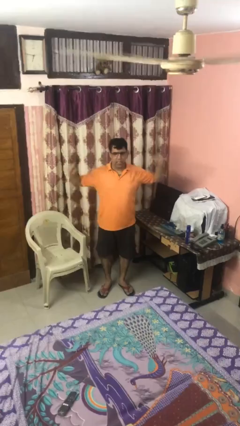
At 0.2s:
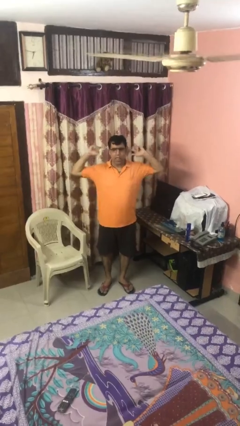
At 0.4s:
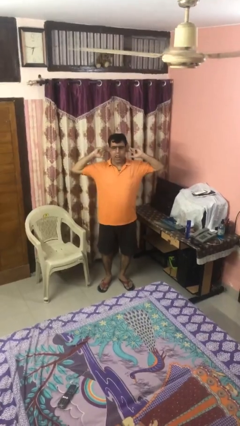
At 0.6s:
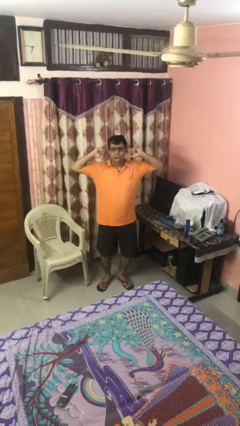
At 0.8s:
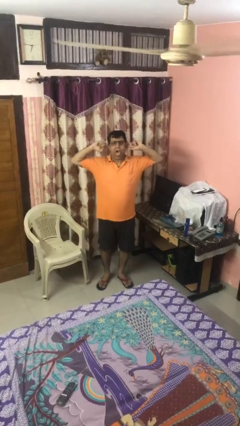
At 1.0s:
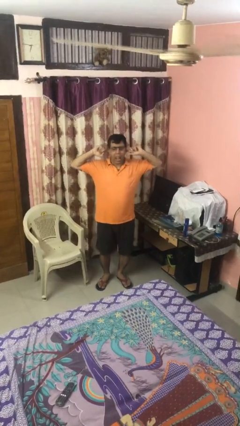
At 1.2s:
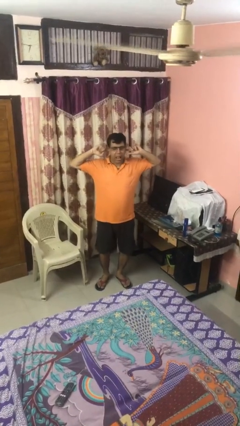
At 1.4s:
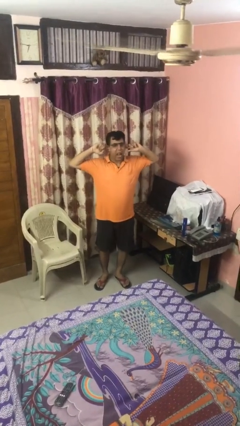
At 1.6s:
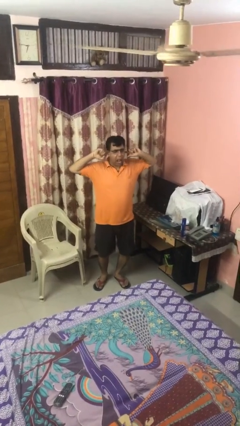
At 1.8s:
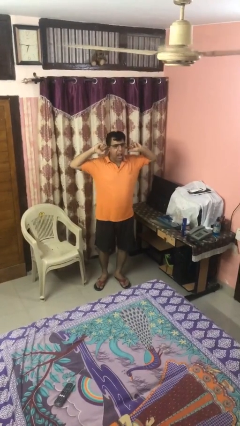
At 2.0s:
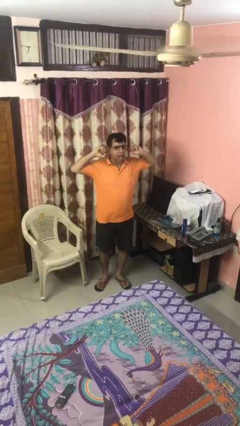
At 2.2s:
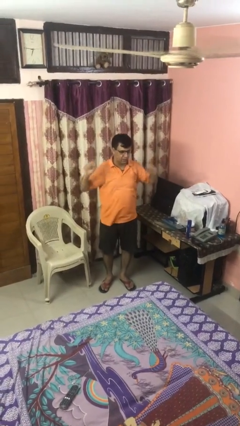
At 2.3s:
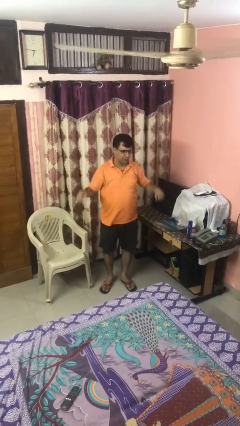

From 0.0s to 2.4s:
person puts fingers in ear

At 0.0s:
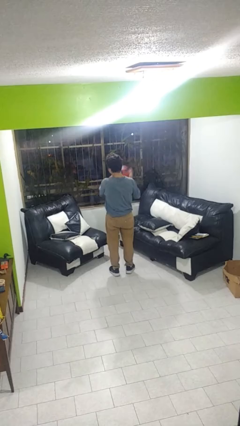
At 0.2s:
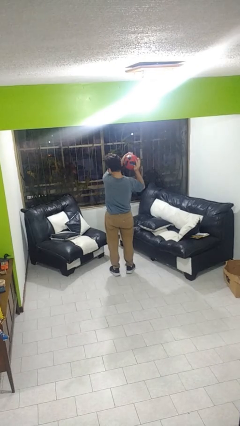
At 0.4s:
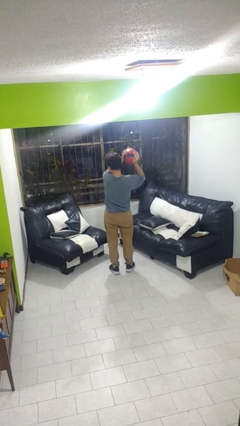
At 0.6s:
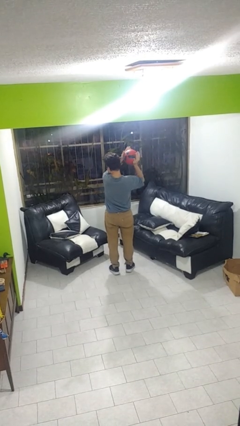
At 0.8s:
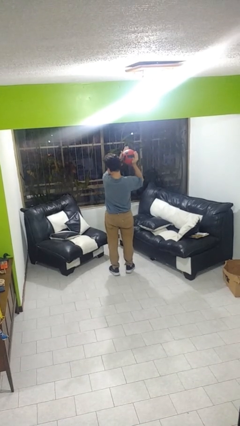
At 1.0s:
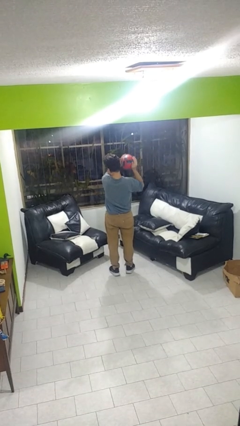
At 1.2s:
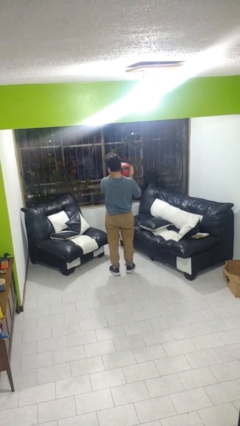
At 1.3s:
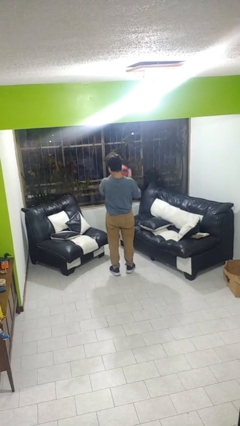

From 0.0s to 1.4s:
person squeezes object

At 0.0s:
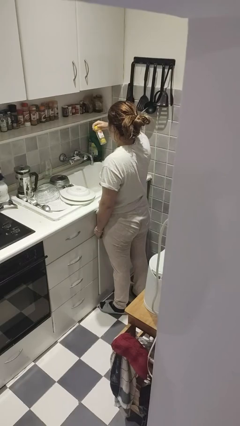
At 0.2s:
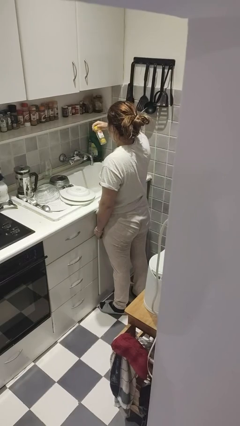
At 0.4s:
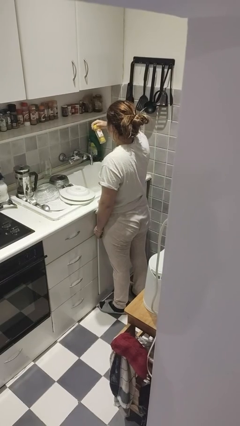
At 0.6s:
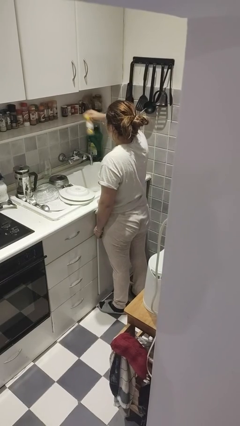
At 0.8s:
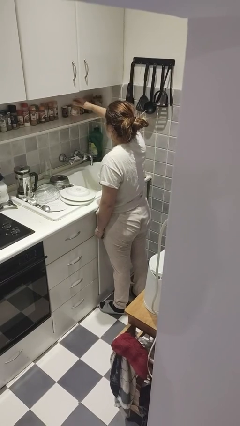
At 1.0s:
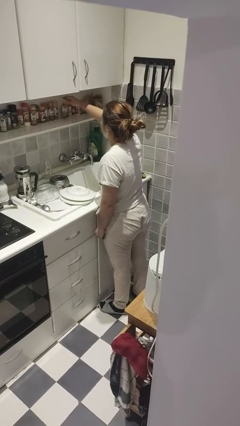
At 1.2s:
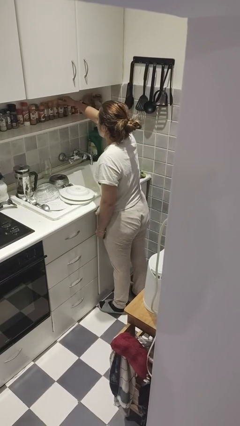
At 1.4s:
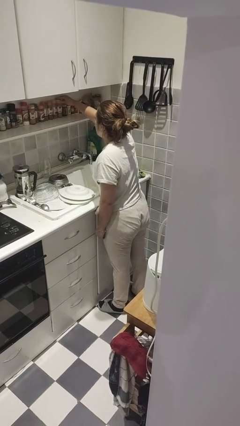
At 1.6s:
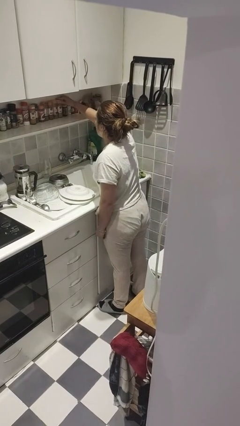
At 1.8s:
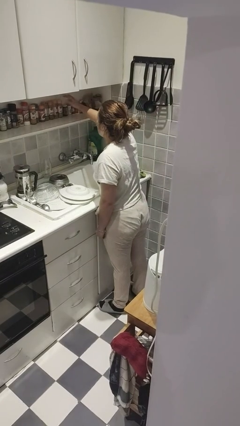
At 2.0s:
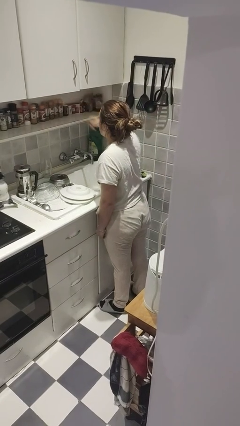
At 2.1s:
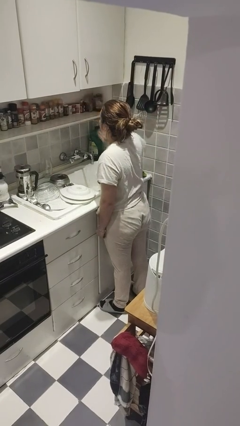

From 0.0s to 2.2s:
person puts down object on countertop

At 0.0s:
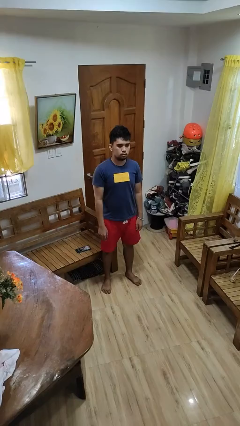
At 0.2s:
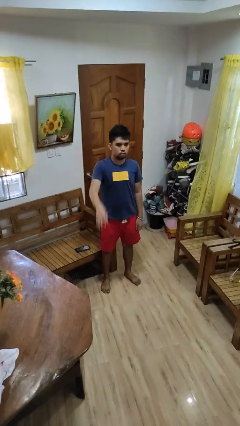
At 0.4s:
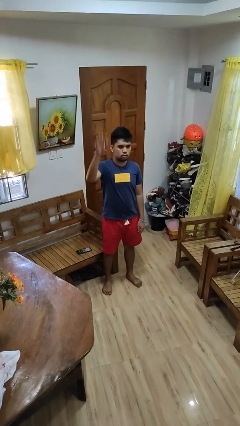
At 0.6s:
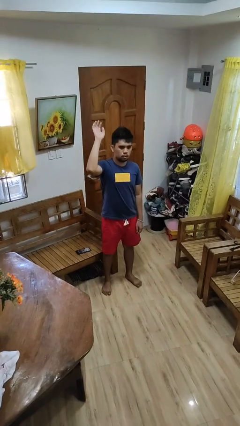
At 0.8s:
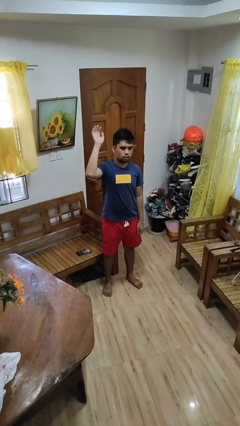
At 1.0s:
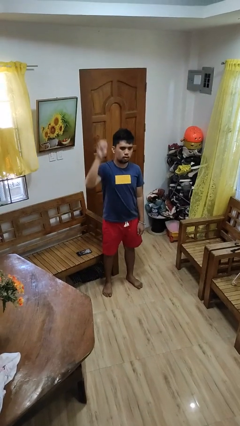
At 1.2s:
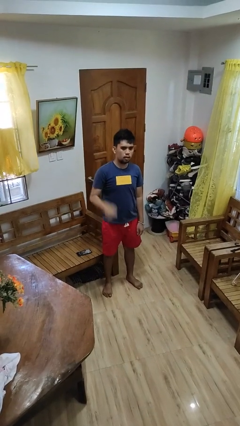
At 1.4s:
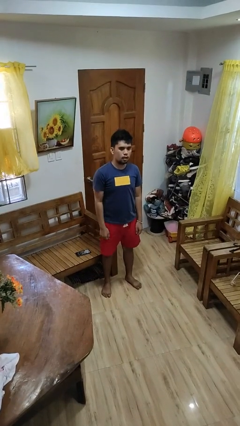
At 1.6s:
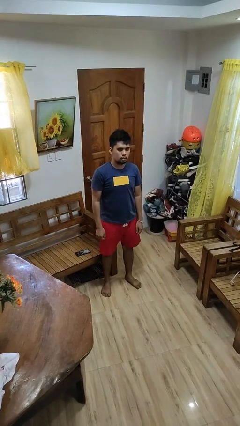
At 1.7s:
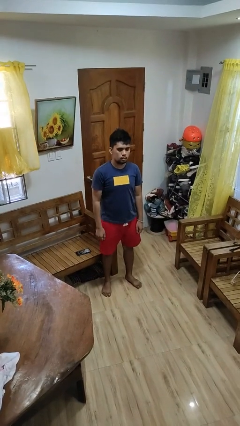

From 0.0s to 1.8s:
person gestures swipe up

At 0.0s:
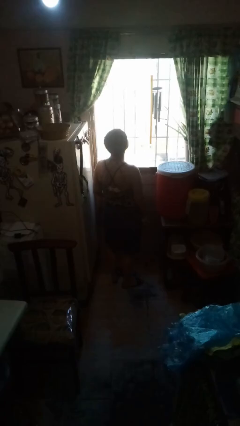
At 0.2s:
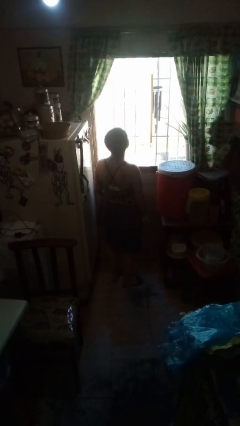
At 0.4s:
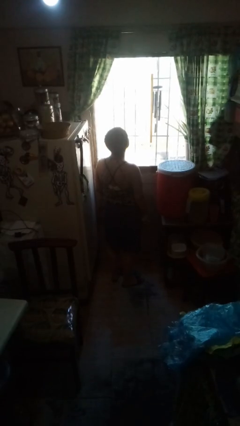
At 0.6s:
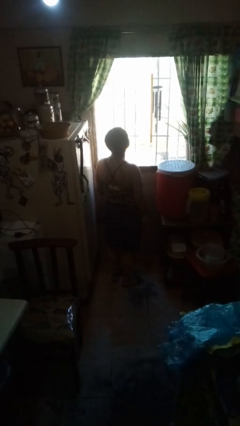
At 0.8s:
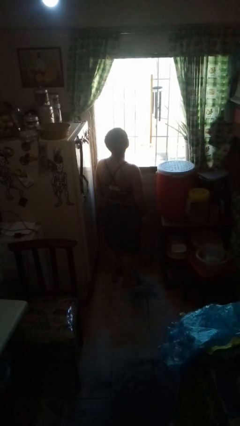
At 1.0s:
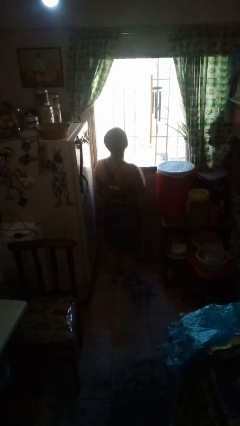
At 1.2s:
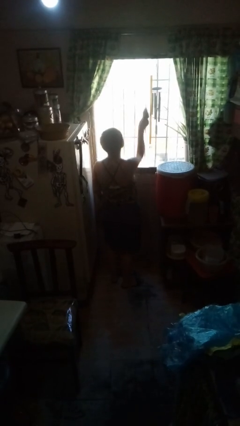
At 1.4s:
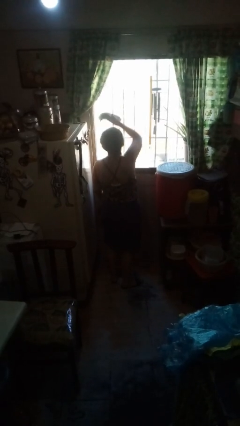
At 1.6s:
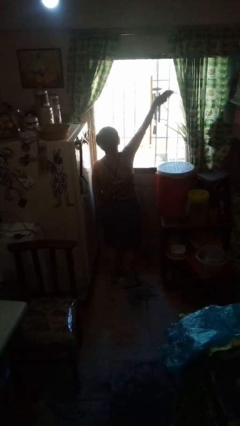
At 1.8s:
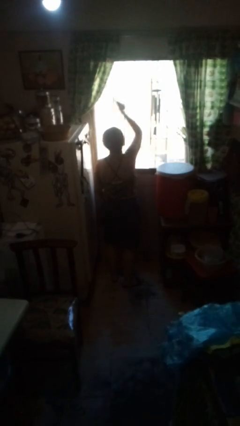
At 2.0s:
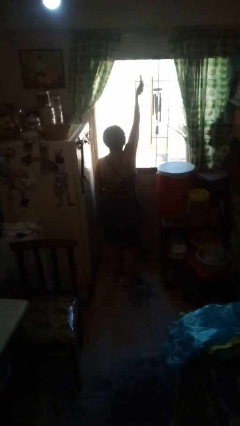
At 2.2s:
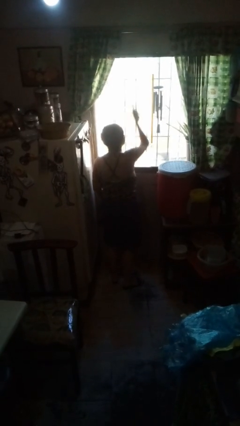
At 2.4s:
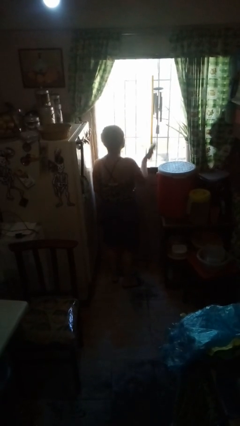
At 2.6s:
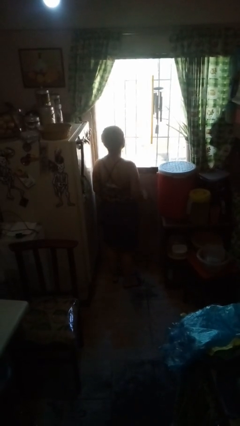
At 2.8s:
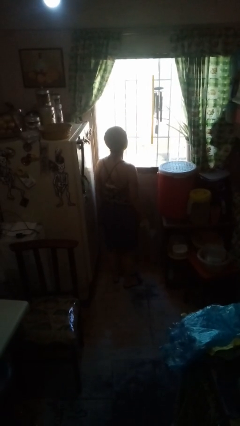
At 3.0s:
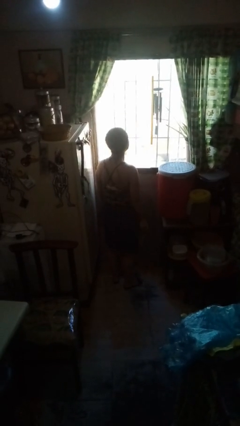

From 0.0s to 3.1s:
person washes window

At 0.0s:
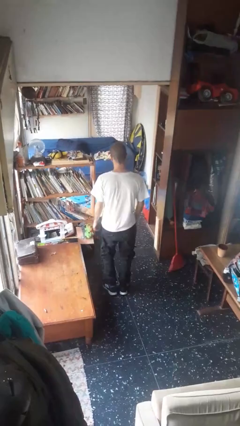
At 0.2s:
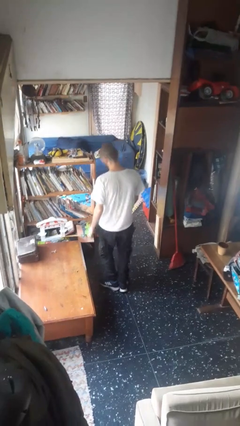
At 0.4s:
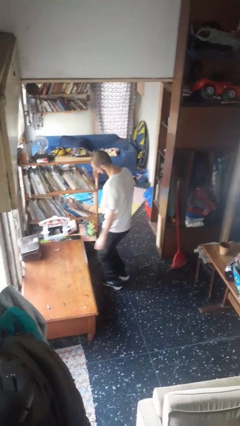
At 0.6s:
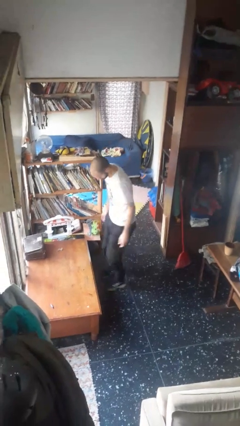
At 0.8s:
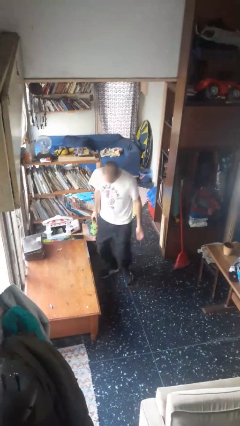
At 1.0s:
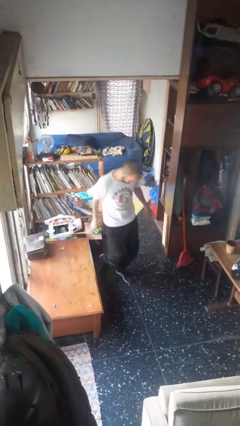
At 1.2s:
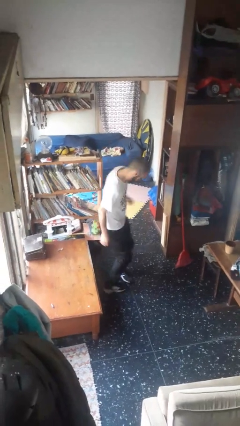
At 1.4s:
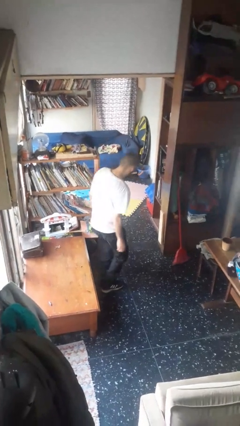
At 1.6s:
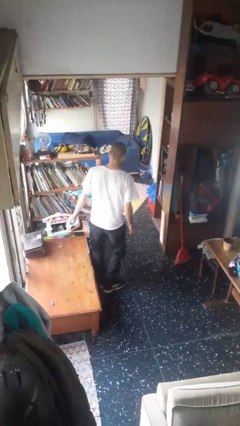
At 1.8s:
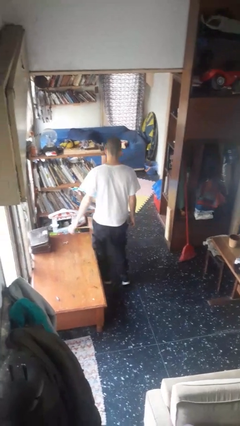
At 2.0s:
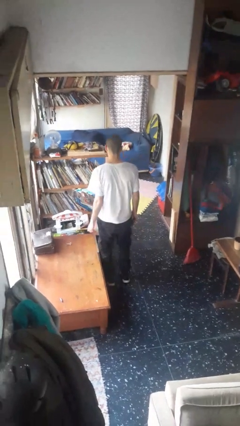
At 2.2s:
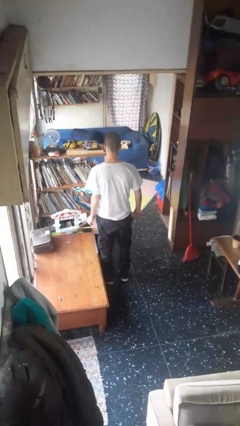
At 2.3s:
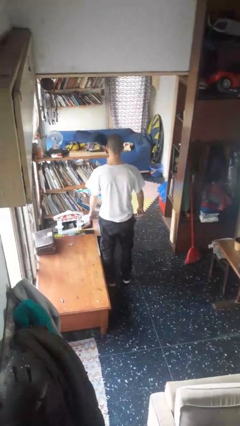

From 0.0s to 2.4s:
person twirls

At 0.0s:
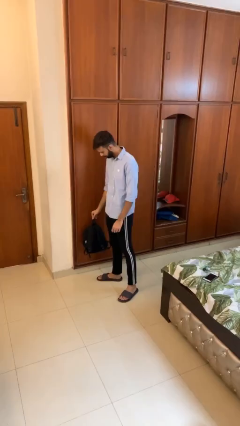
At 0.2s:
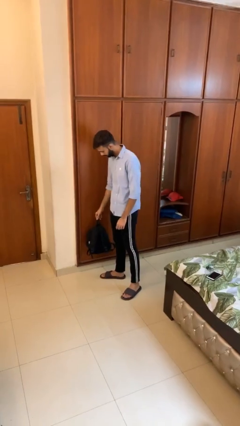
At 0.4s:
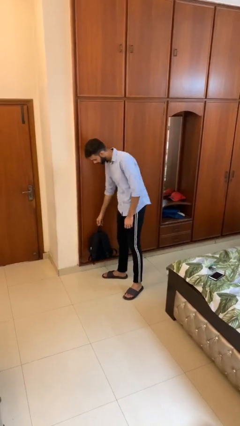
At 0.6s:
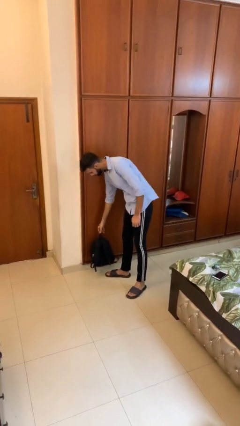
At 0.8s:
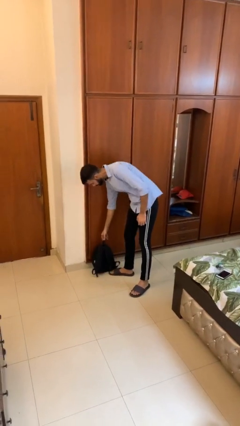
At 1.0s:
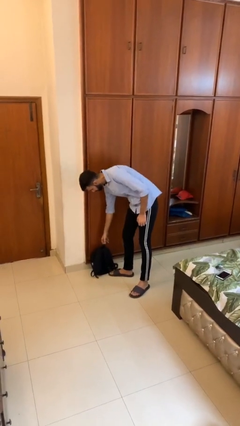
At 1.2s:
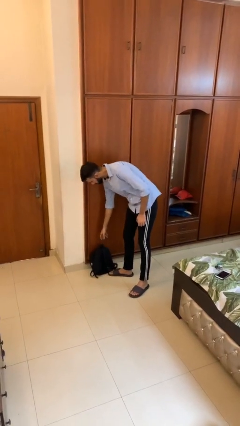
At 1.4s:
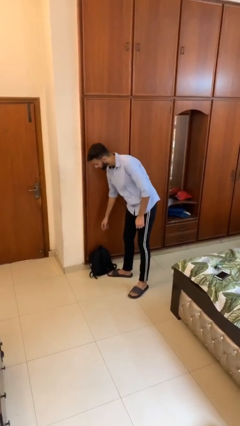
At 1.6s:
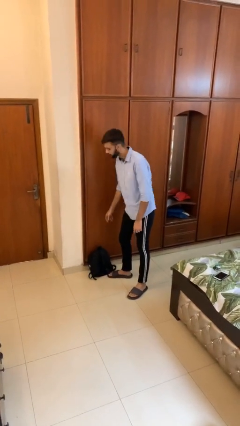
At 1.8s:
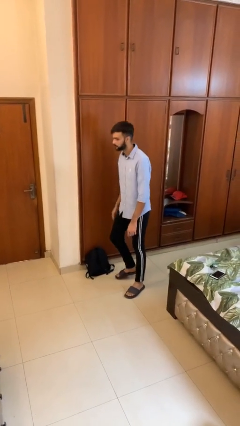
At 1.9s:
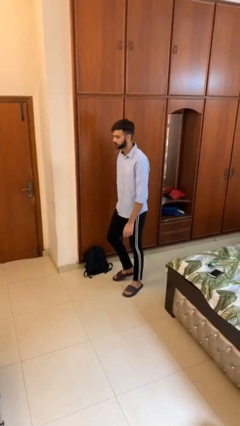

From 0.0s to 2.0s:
person puts down object on floor

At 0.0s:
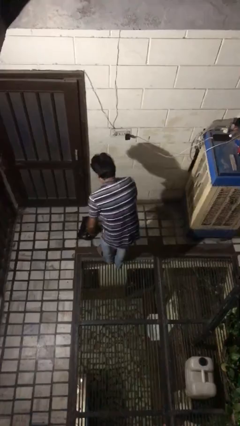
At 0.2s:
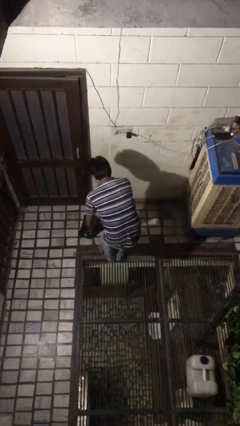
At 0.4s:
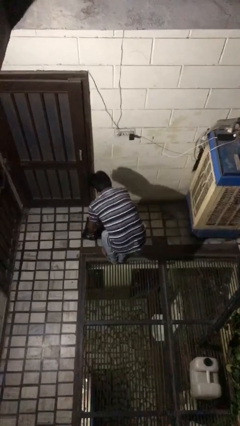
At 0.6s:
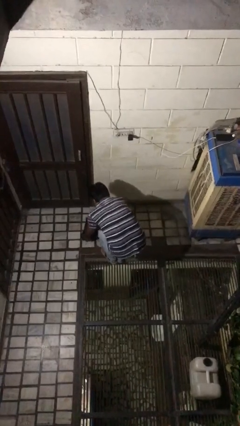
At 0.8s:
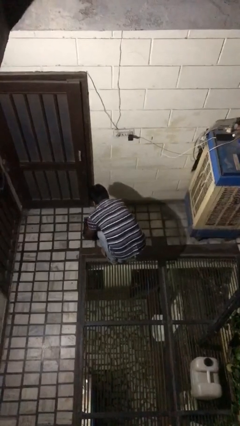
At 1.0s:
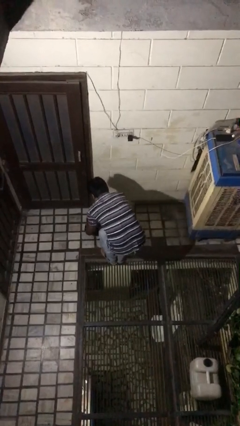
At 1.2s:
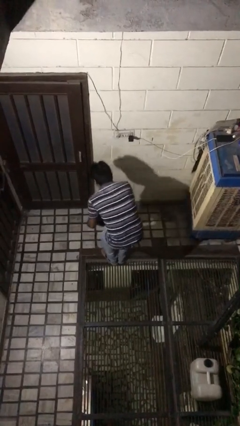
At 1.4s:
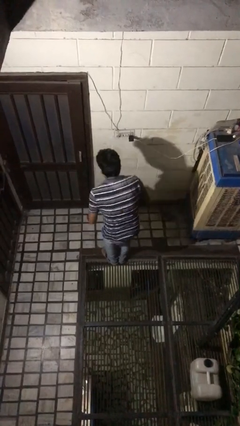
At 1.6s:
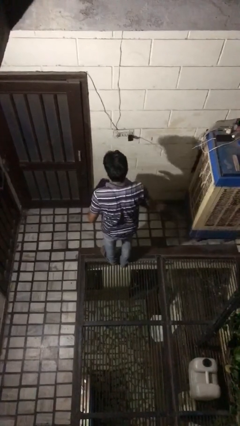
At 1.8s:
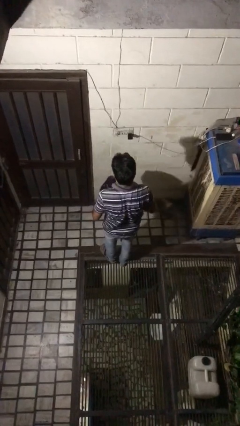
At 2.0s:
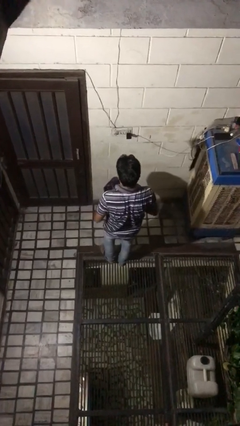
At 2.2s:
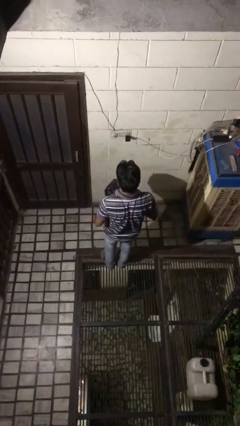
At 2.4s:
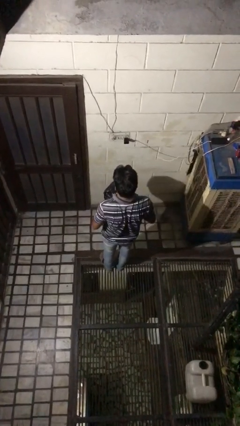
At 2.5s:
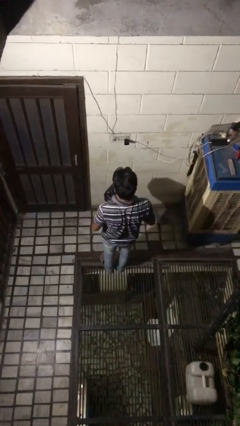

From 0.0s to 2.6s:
person picks up object from floor
